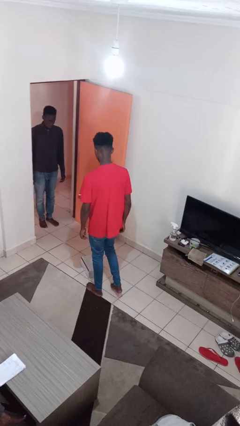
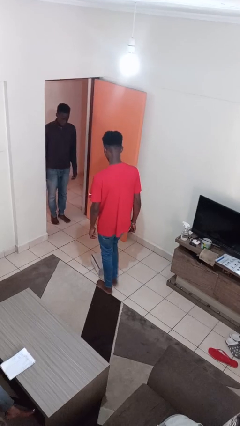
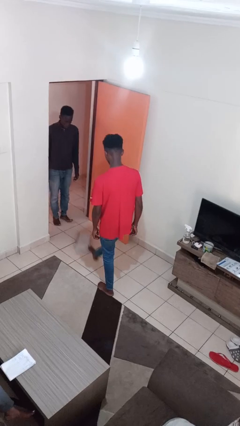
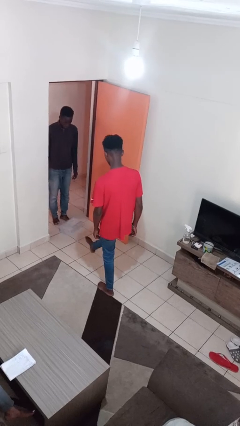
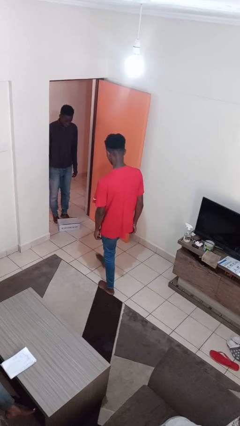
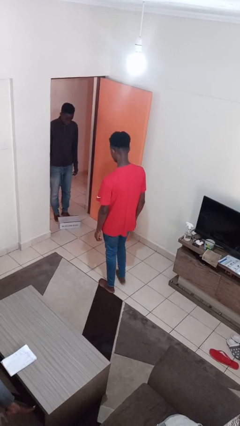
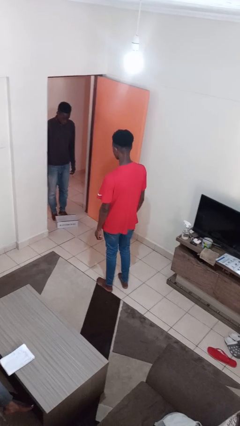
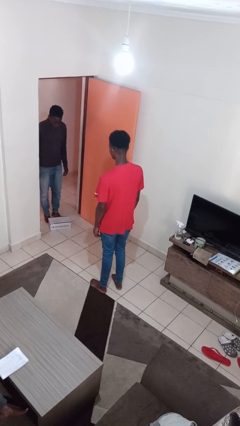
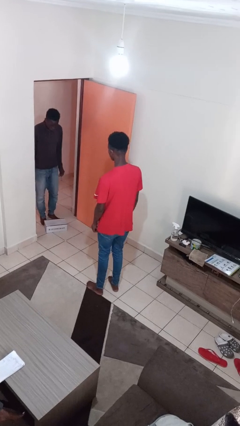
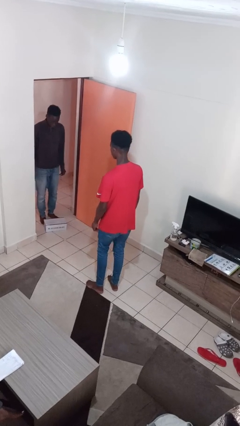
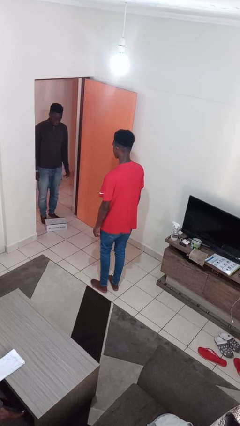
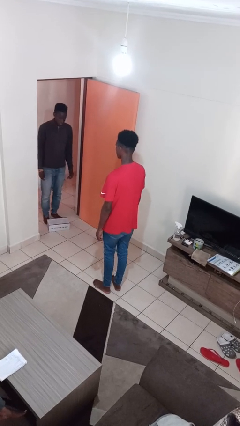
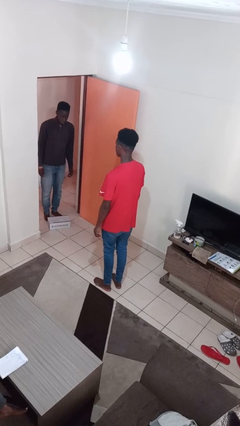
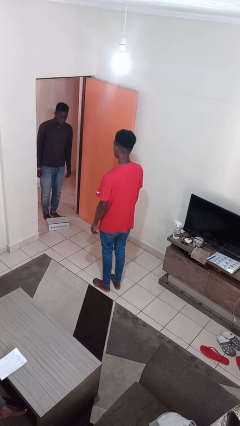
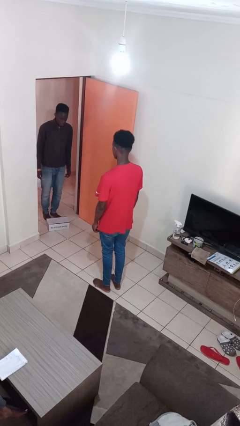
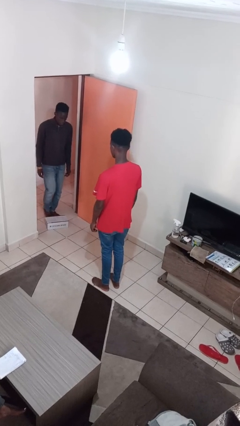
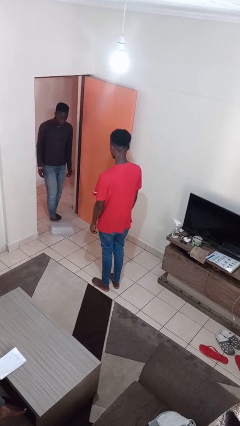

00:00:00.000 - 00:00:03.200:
person kicks object to person

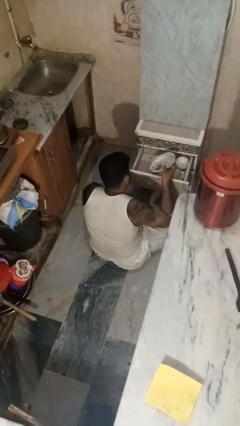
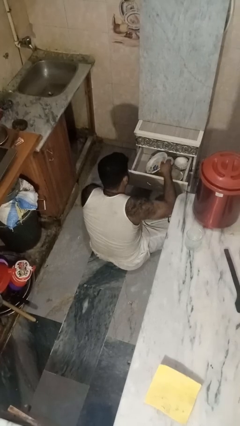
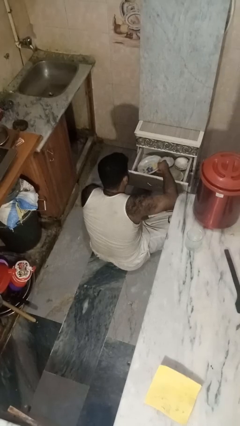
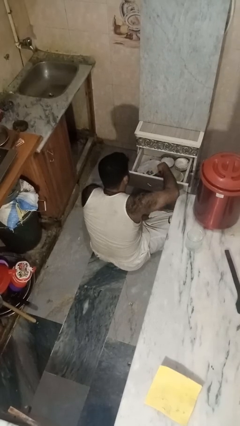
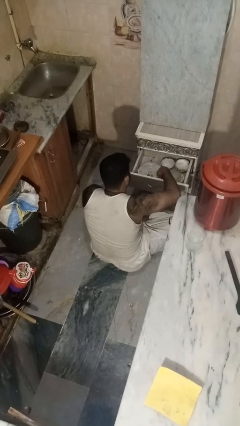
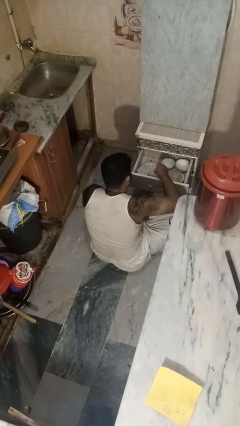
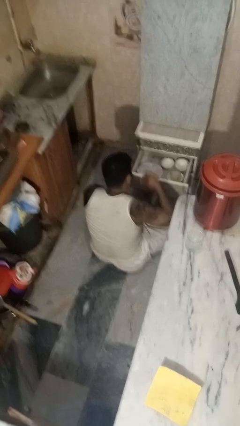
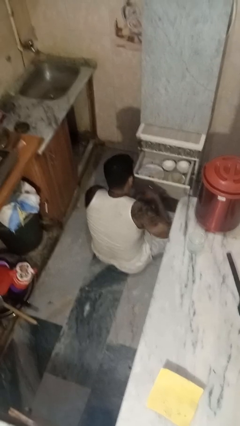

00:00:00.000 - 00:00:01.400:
person puts object into kitchen drawer

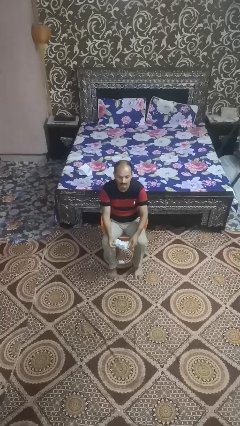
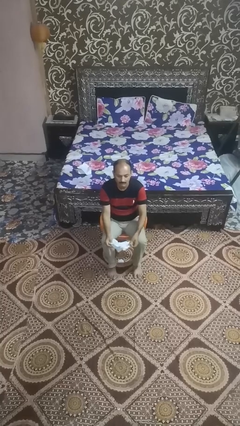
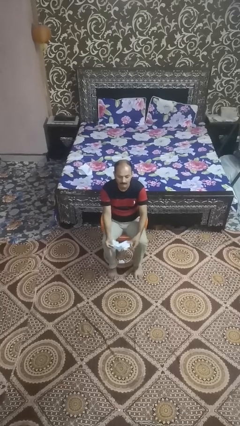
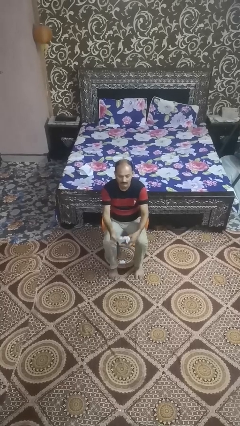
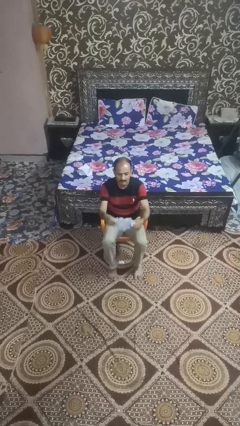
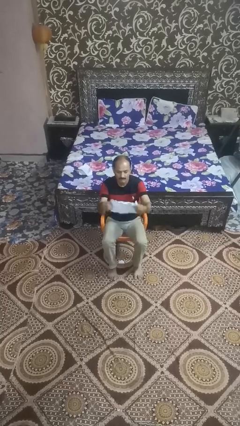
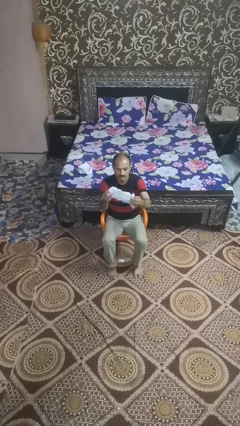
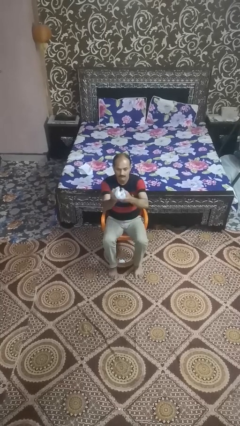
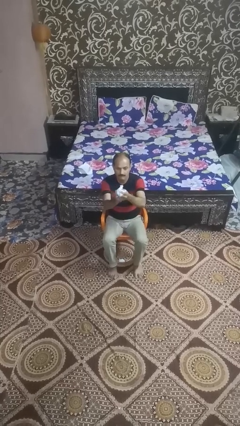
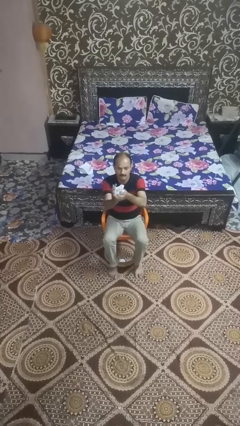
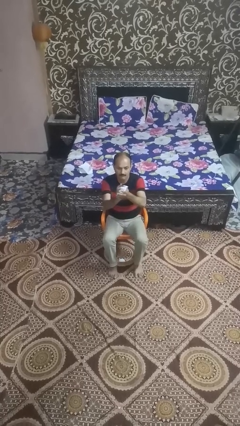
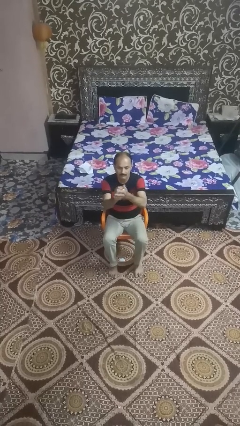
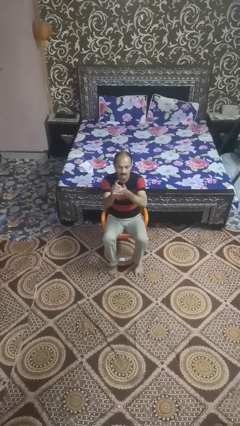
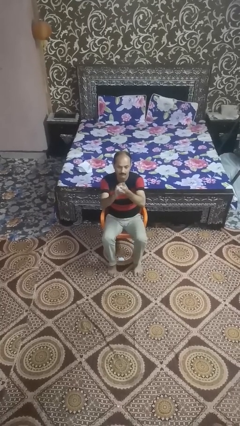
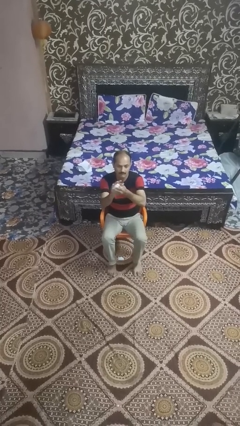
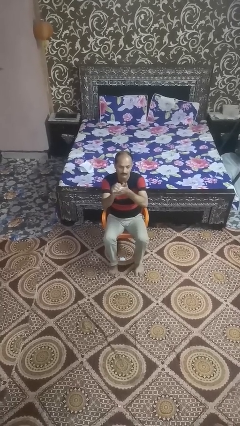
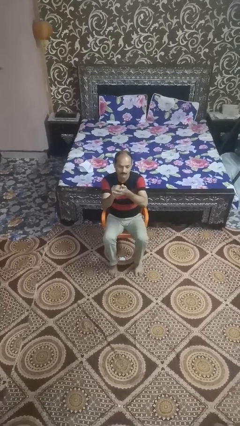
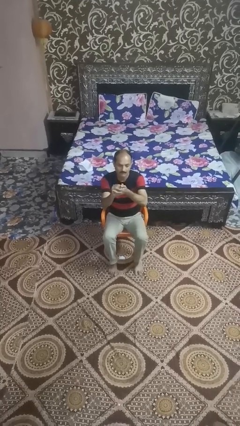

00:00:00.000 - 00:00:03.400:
person crumples paper

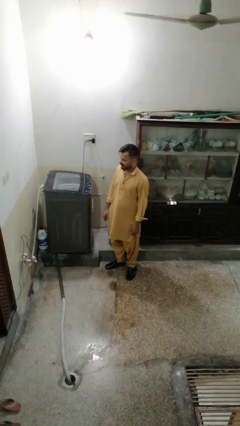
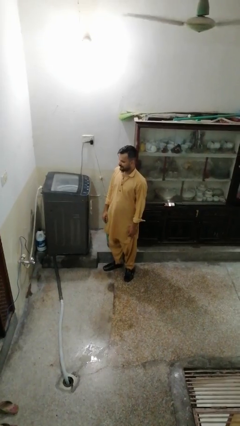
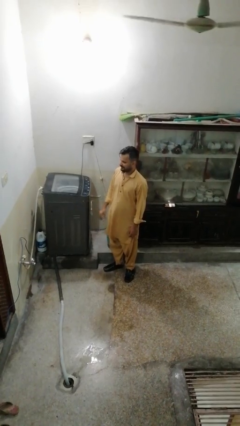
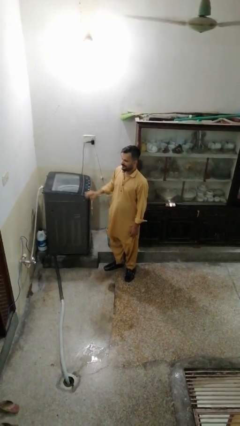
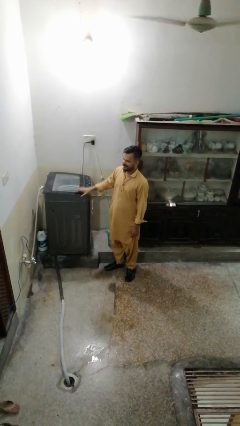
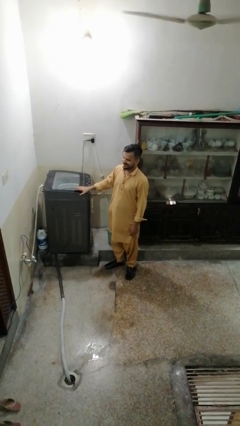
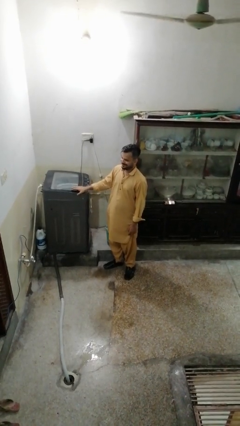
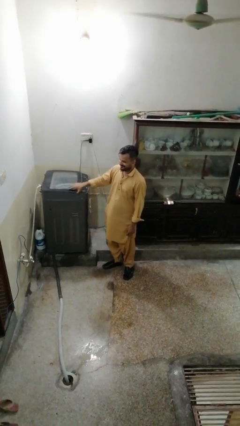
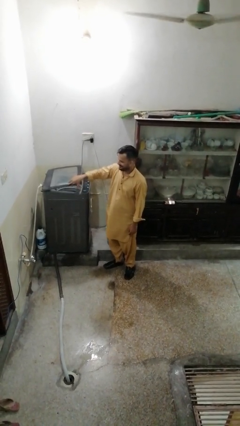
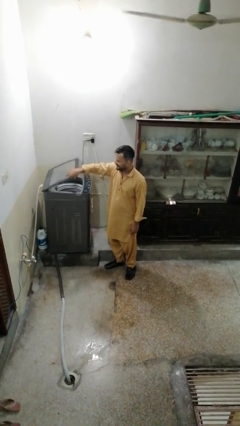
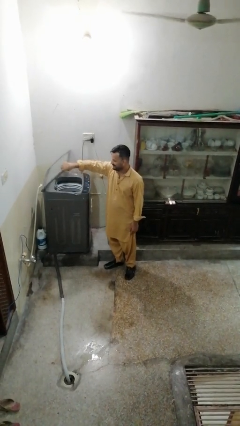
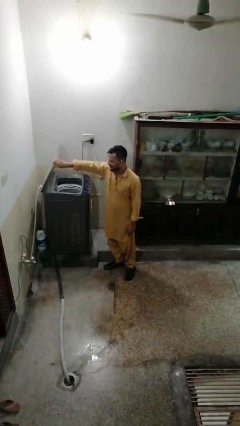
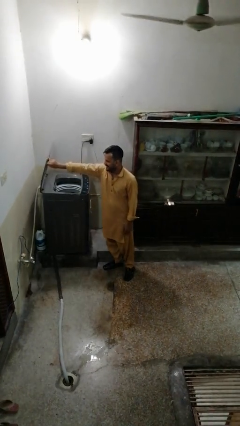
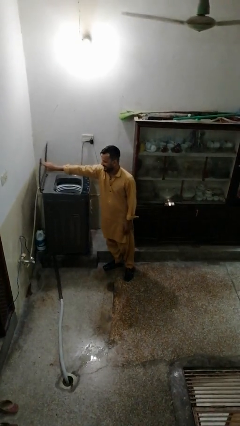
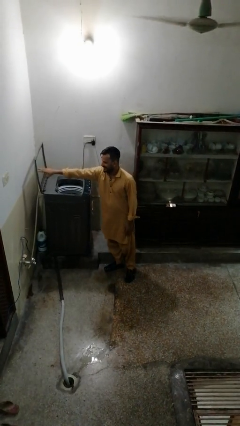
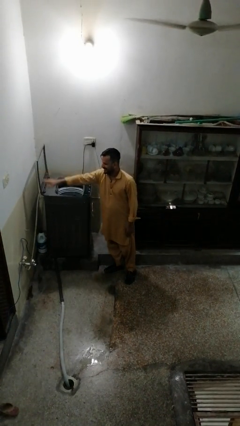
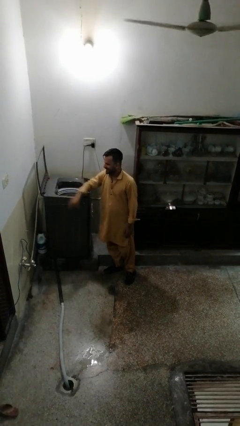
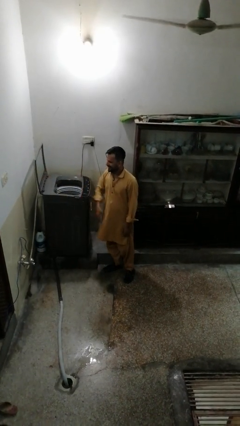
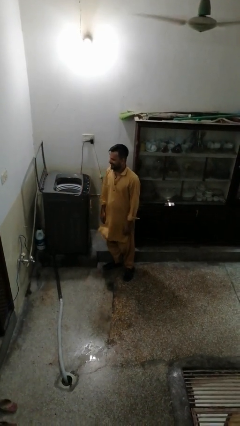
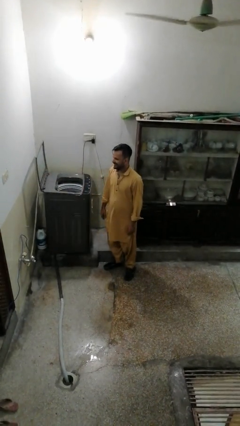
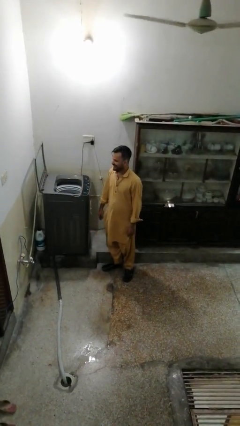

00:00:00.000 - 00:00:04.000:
person opens clothes washer

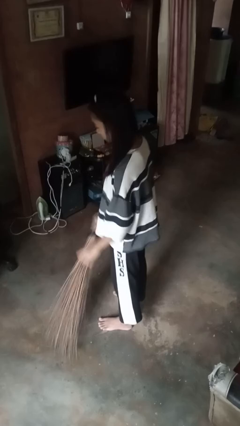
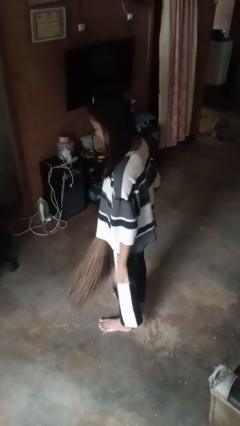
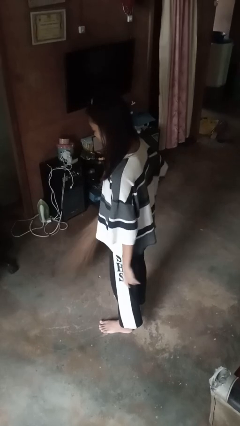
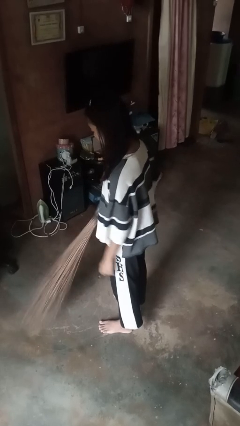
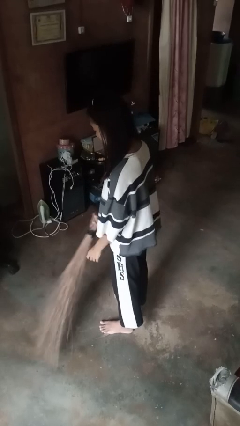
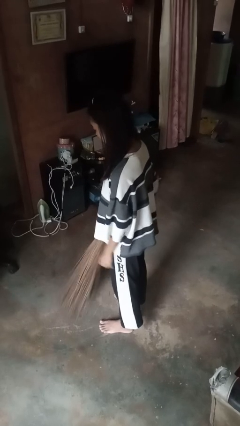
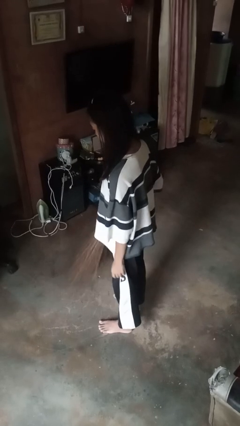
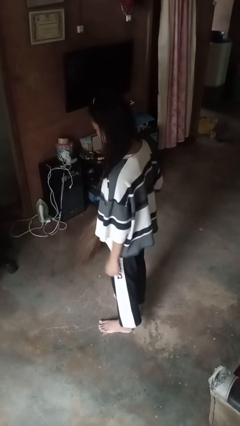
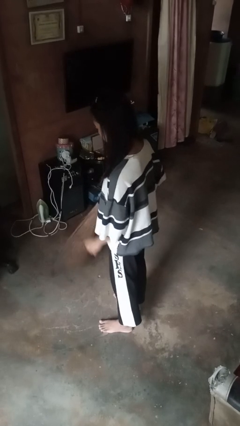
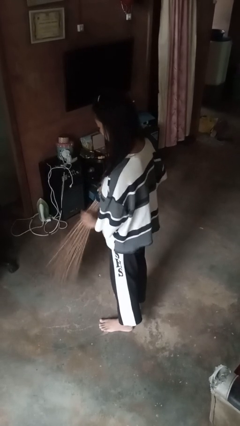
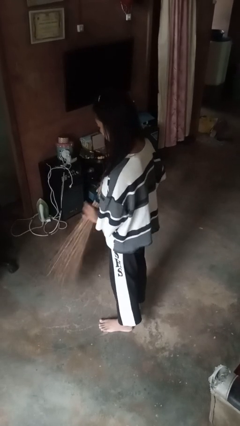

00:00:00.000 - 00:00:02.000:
person sweeps floor

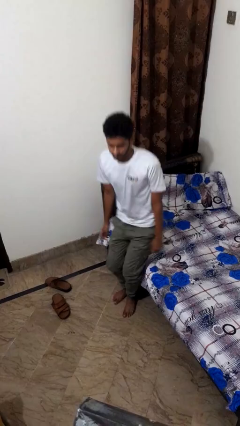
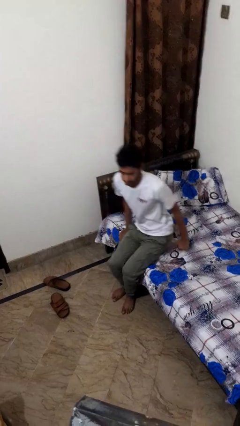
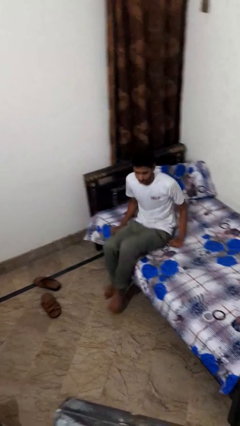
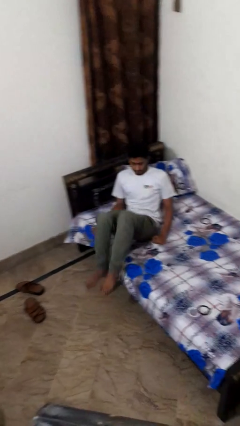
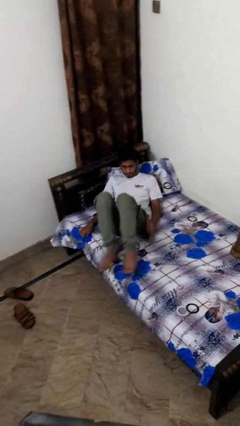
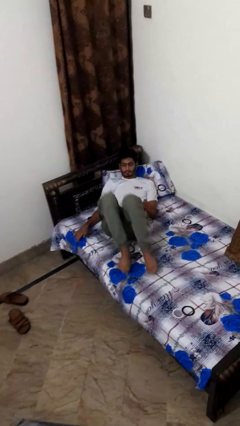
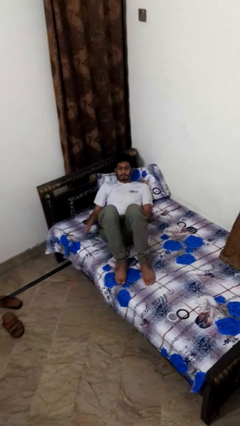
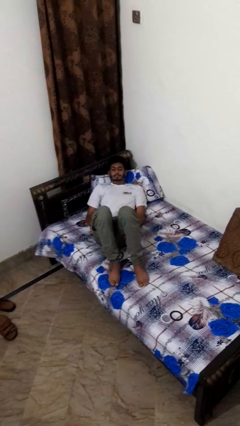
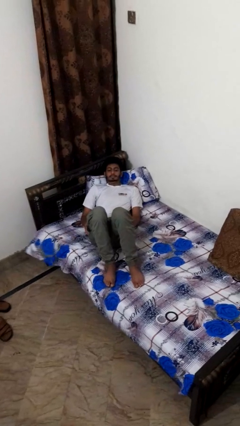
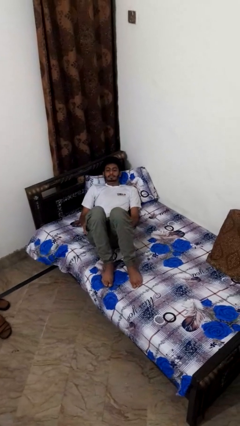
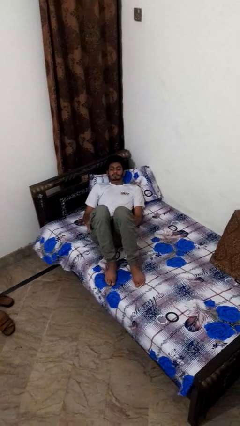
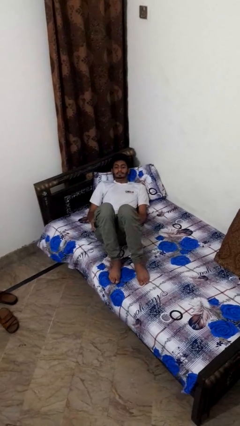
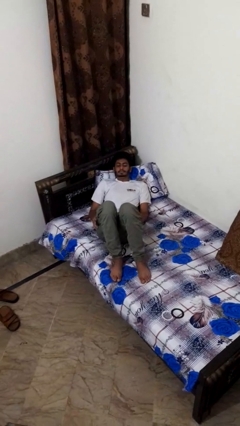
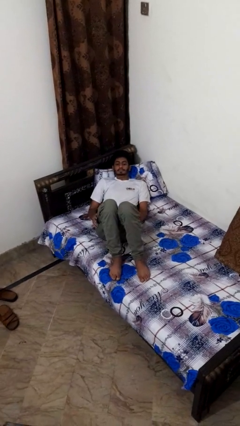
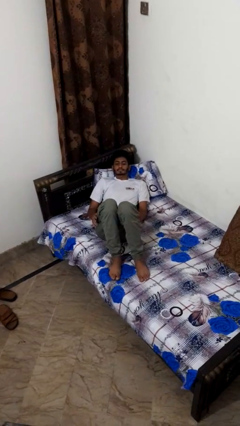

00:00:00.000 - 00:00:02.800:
person lies down on bed

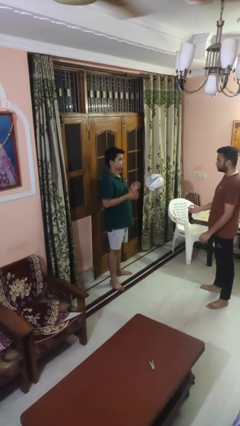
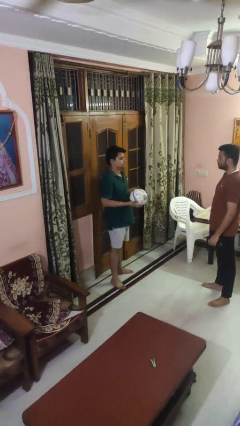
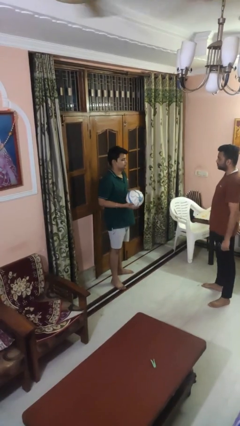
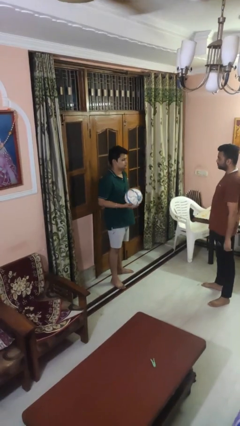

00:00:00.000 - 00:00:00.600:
person catches object from person
